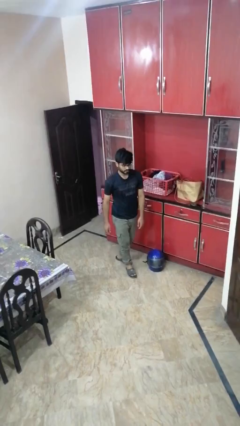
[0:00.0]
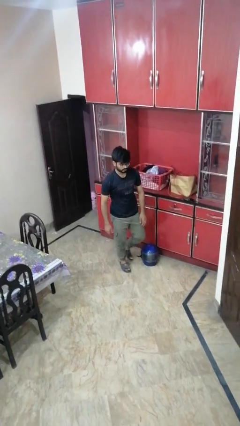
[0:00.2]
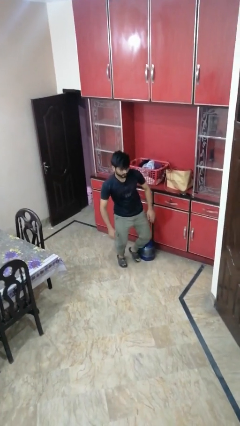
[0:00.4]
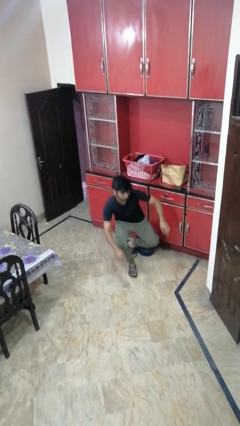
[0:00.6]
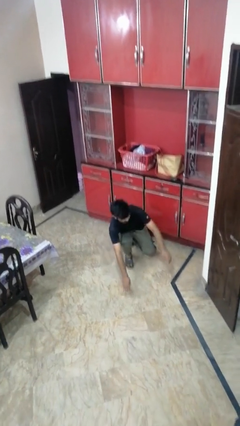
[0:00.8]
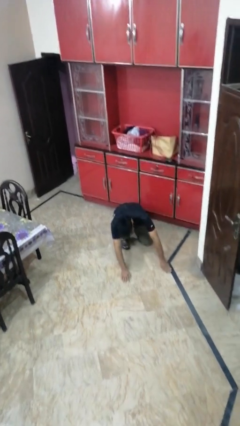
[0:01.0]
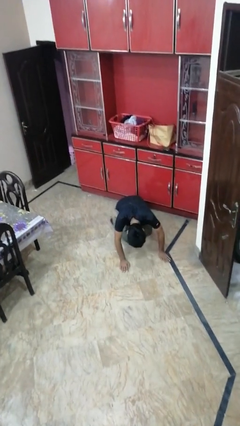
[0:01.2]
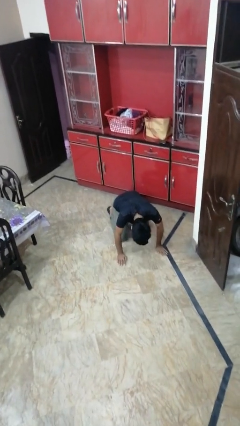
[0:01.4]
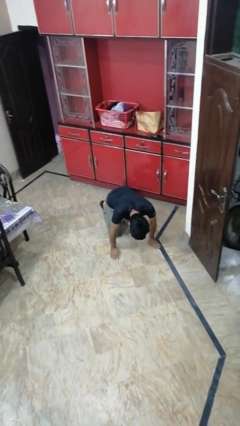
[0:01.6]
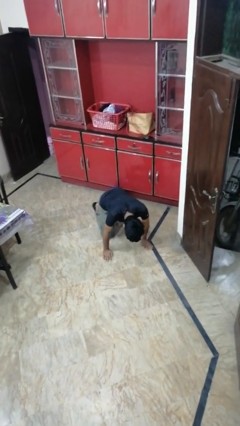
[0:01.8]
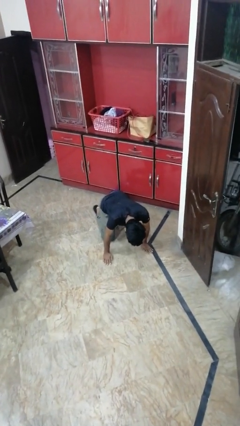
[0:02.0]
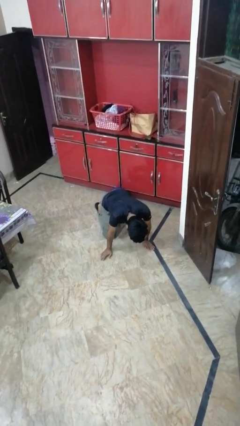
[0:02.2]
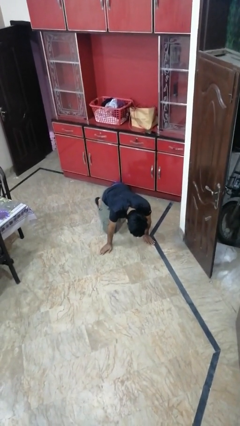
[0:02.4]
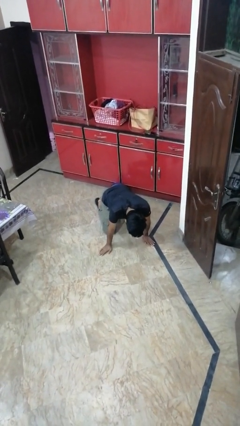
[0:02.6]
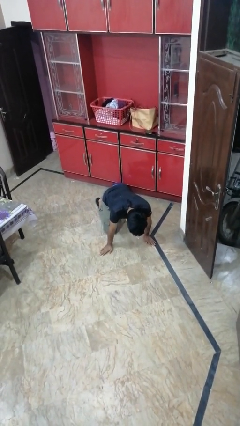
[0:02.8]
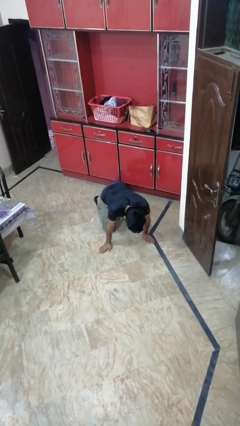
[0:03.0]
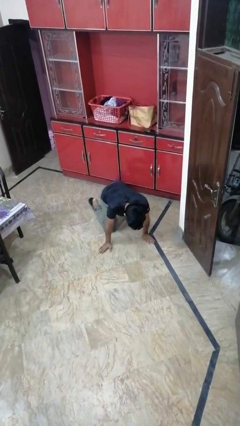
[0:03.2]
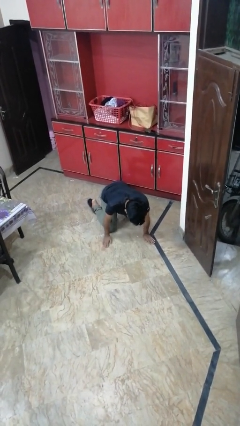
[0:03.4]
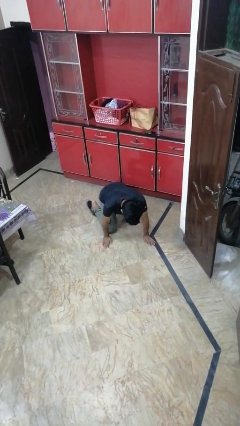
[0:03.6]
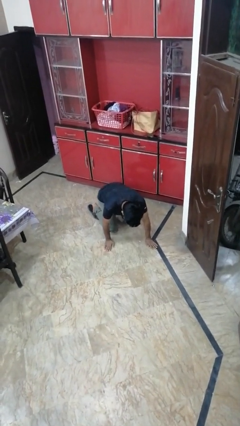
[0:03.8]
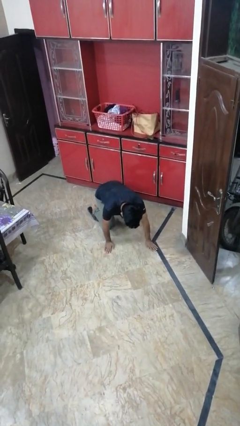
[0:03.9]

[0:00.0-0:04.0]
person trips on object on floor

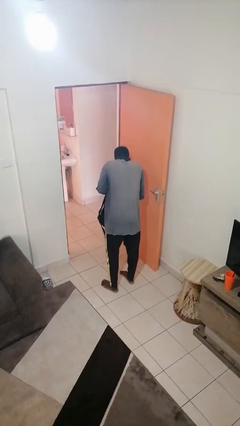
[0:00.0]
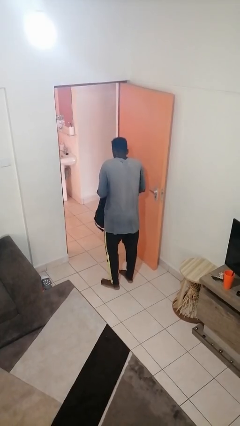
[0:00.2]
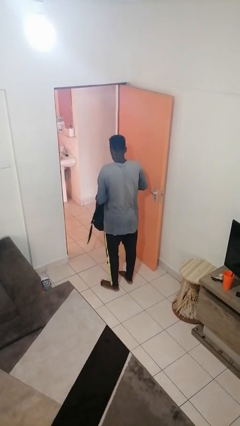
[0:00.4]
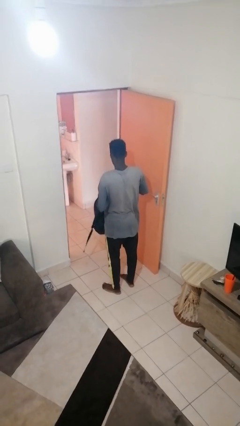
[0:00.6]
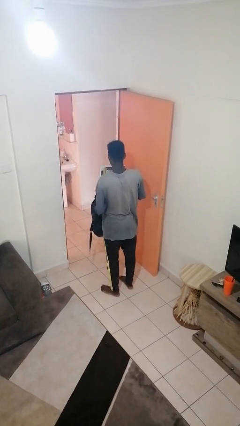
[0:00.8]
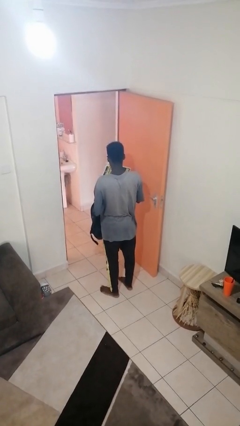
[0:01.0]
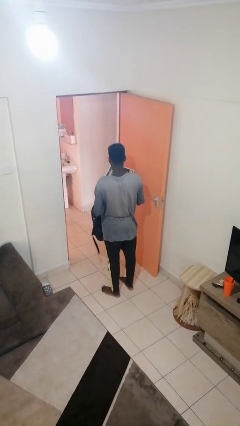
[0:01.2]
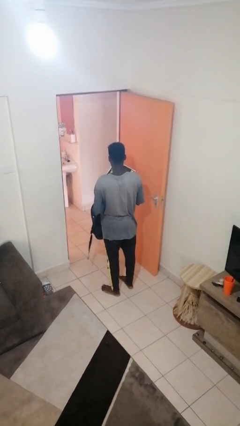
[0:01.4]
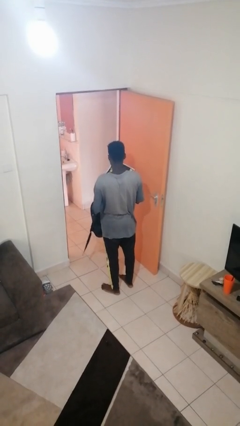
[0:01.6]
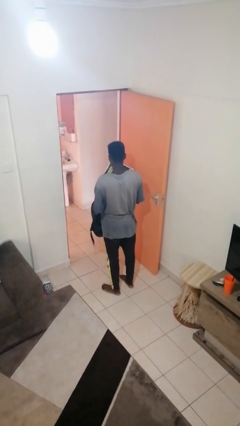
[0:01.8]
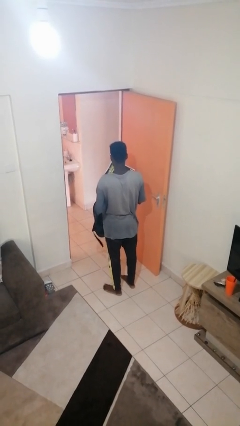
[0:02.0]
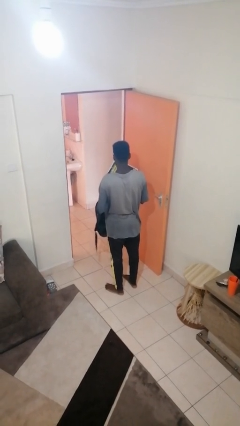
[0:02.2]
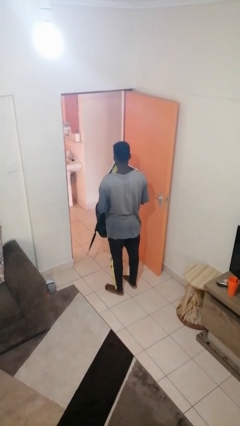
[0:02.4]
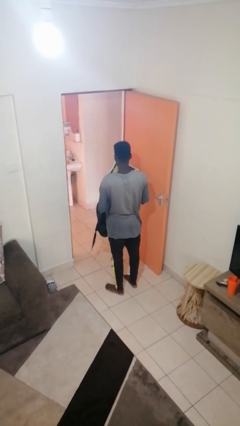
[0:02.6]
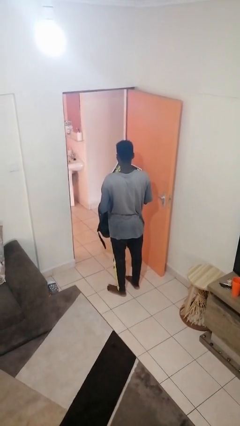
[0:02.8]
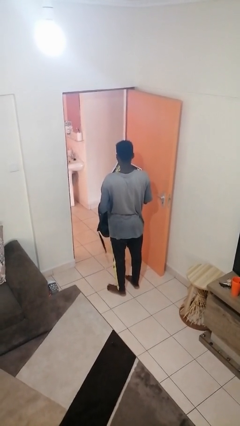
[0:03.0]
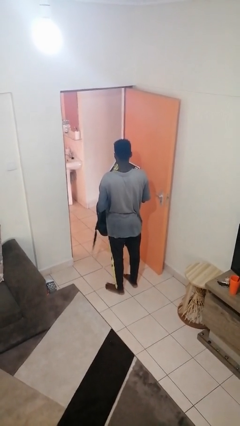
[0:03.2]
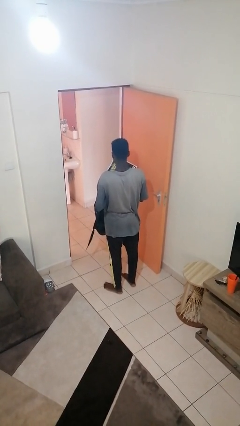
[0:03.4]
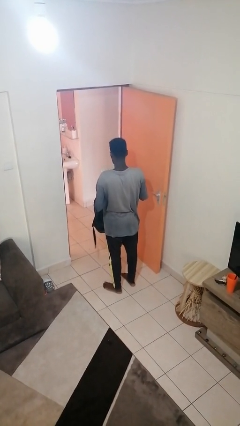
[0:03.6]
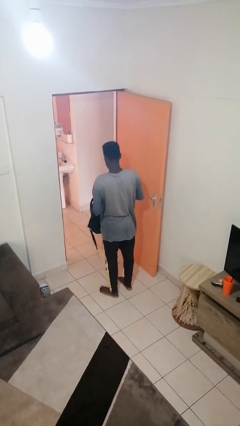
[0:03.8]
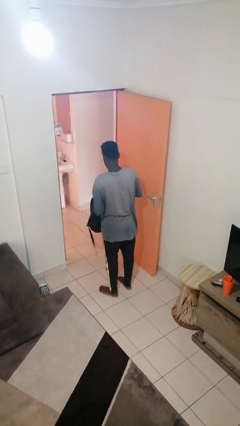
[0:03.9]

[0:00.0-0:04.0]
person takes object from backpack

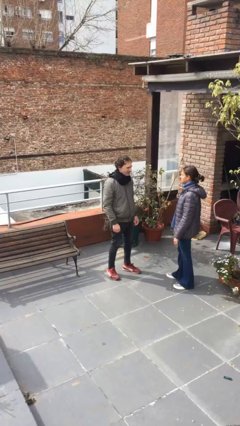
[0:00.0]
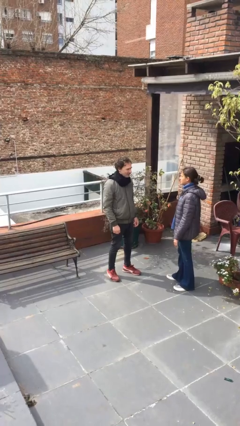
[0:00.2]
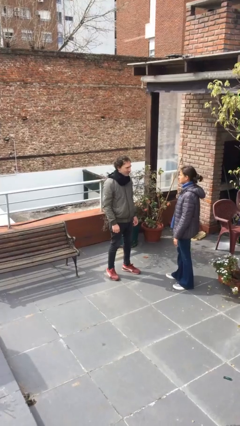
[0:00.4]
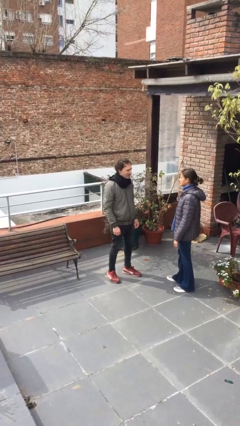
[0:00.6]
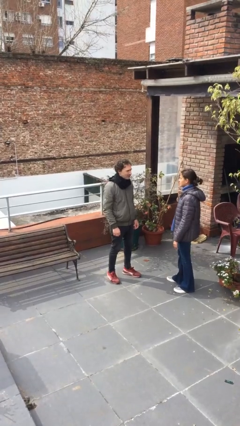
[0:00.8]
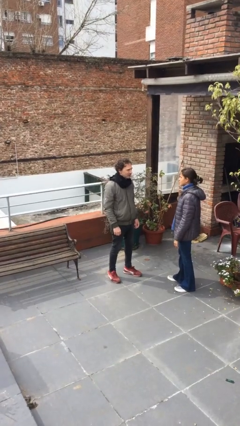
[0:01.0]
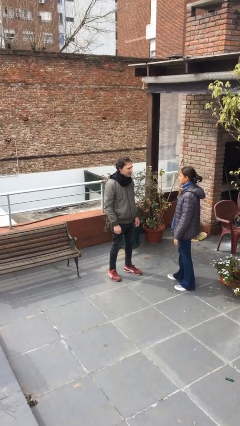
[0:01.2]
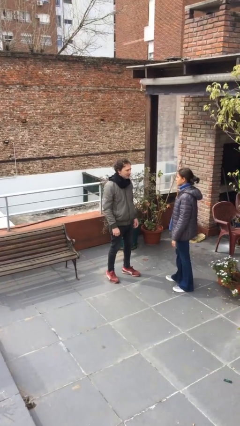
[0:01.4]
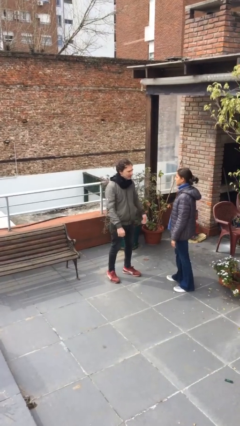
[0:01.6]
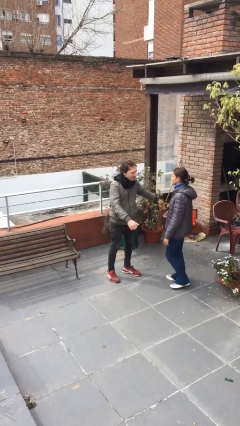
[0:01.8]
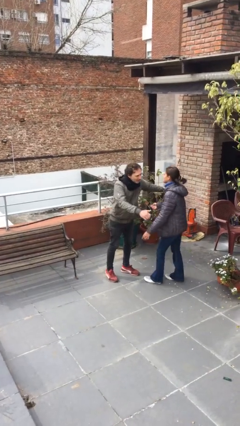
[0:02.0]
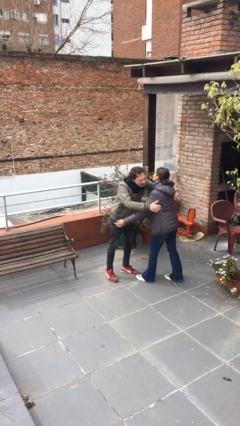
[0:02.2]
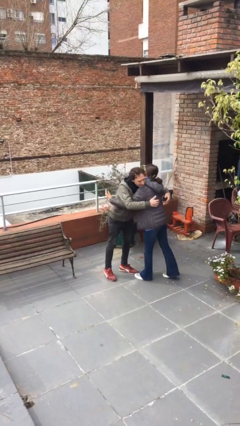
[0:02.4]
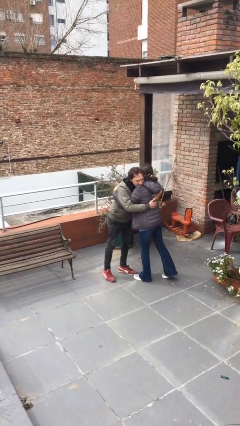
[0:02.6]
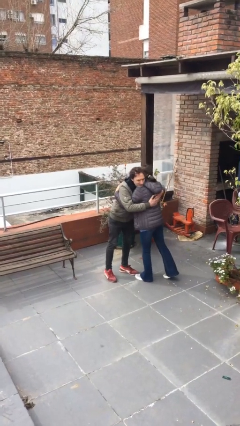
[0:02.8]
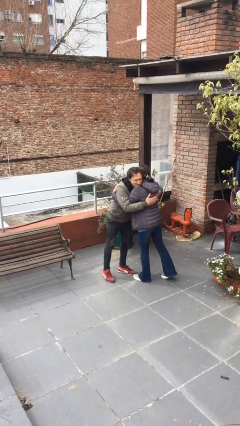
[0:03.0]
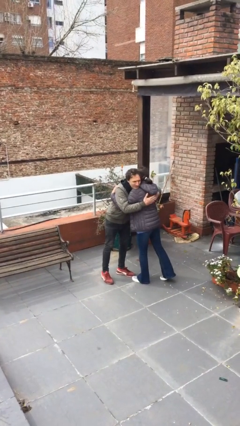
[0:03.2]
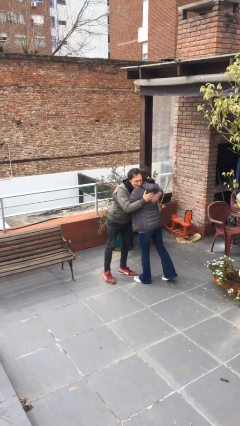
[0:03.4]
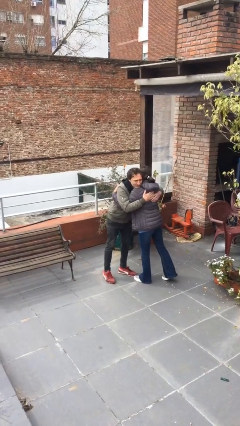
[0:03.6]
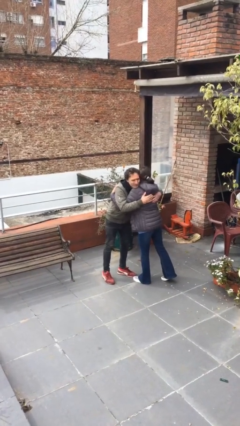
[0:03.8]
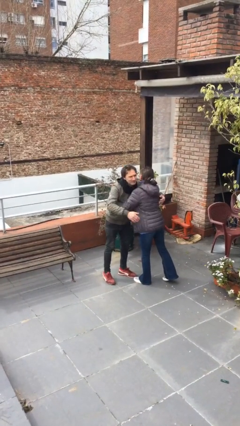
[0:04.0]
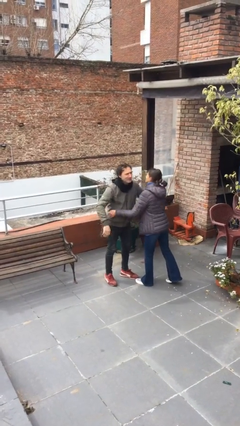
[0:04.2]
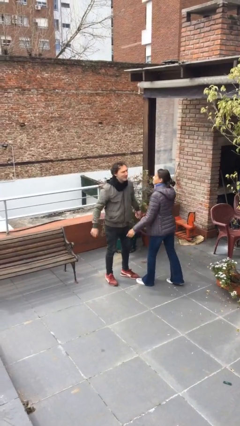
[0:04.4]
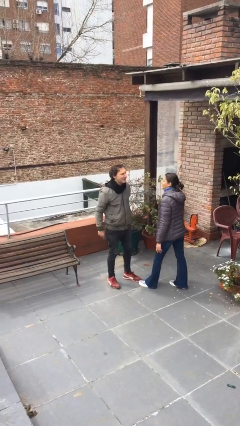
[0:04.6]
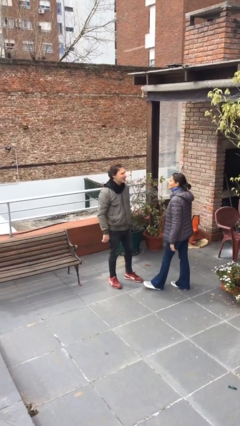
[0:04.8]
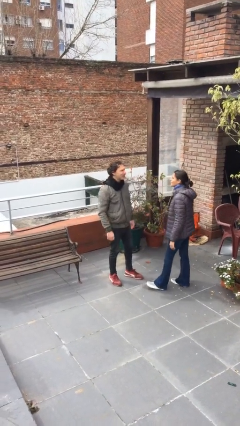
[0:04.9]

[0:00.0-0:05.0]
person embraces person

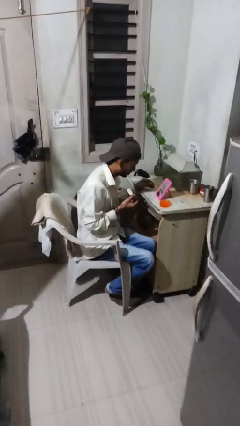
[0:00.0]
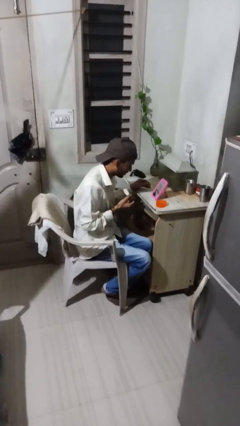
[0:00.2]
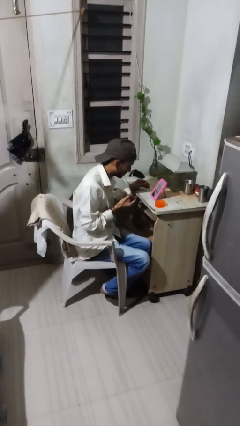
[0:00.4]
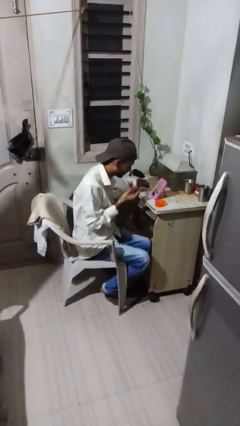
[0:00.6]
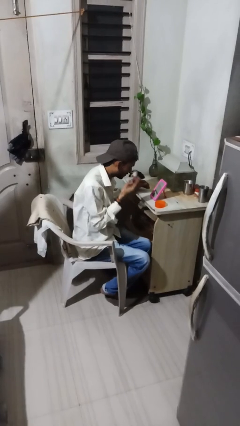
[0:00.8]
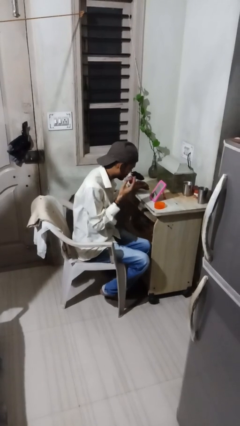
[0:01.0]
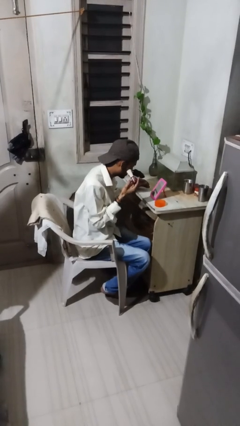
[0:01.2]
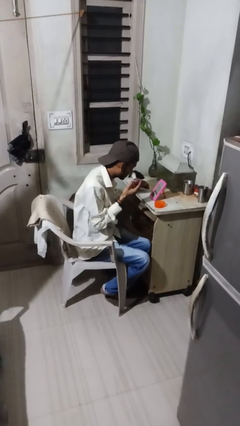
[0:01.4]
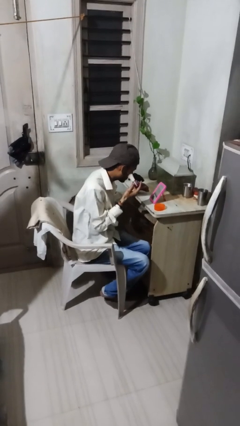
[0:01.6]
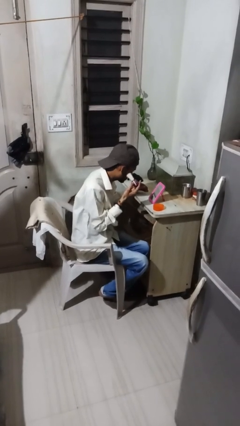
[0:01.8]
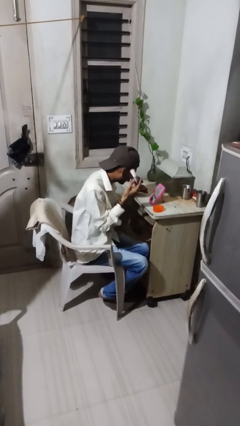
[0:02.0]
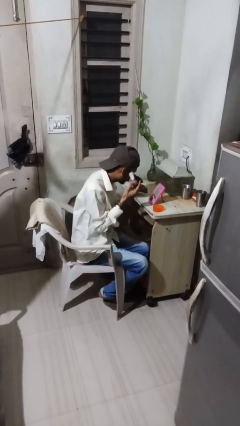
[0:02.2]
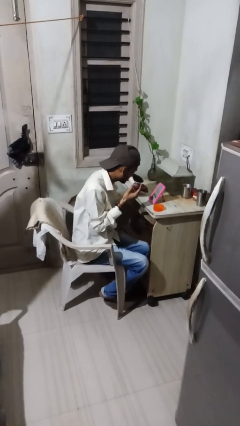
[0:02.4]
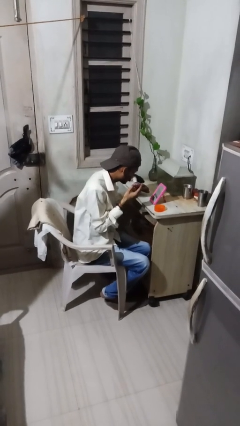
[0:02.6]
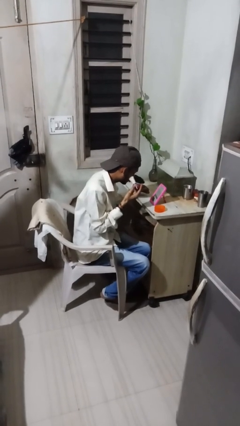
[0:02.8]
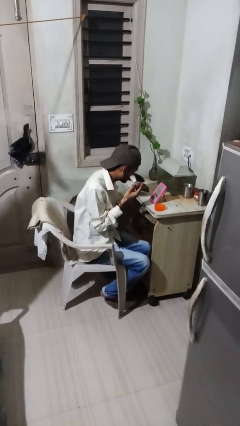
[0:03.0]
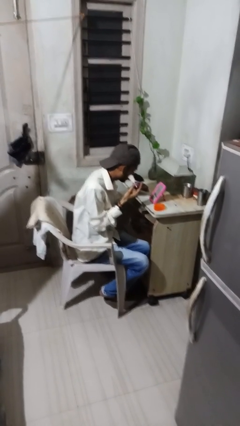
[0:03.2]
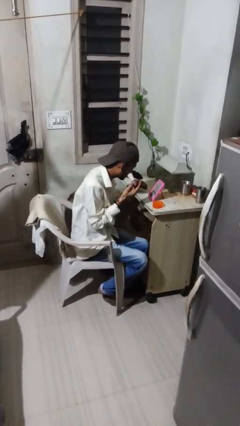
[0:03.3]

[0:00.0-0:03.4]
person applies foundation makeup

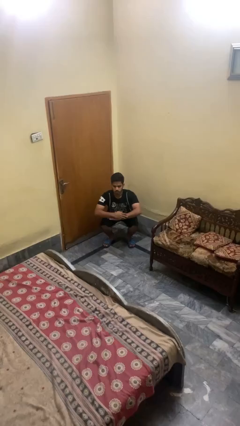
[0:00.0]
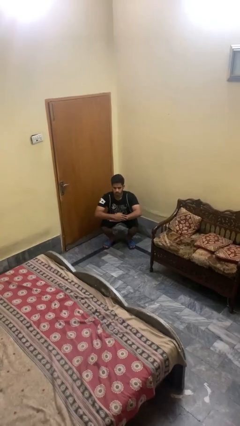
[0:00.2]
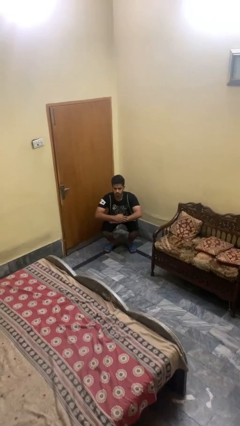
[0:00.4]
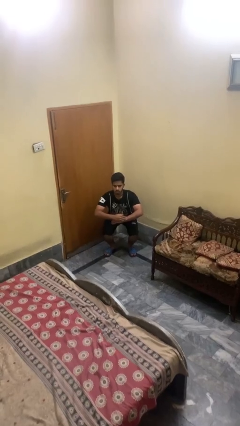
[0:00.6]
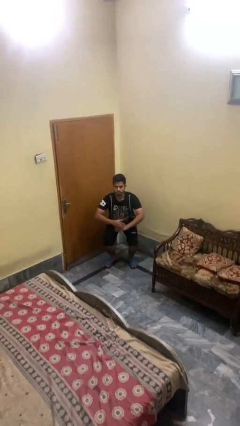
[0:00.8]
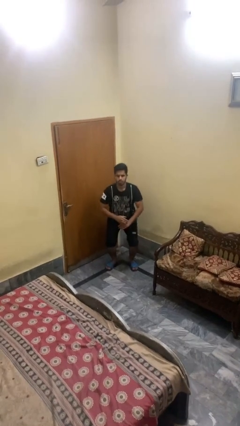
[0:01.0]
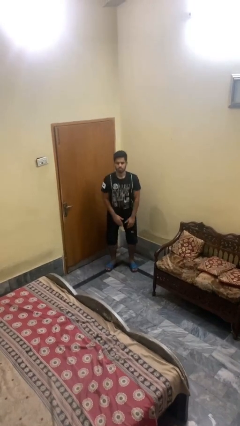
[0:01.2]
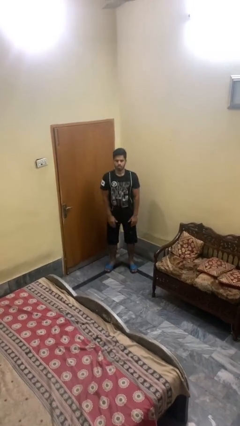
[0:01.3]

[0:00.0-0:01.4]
person stands up
